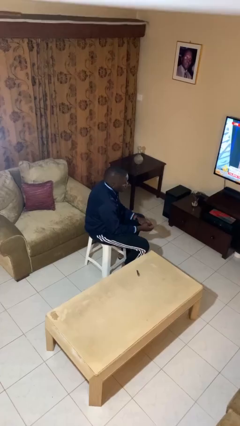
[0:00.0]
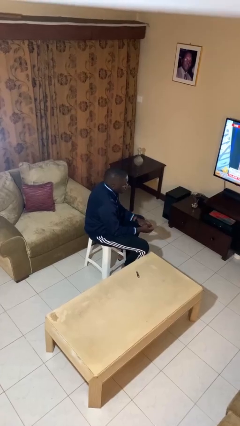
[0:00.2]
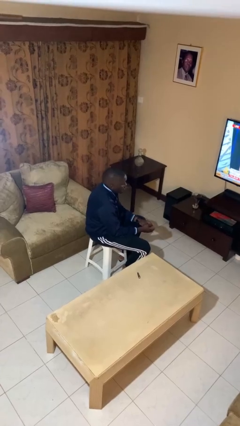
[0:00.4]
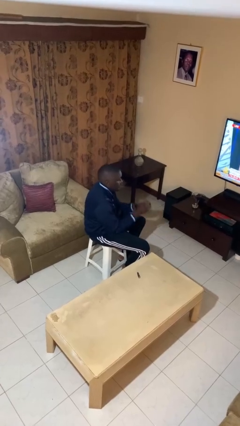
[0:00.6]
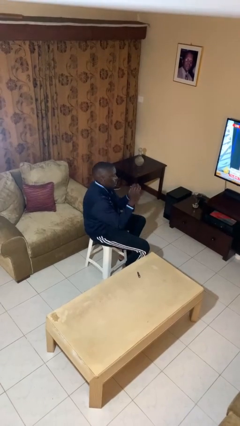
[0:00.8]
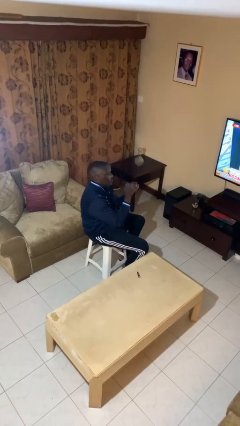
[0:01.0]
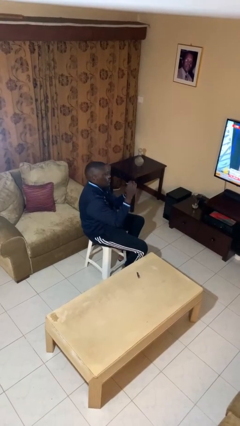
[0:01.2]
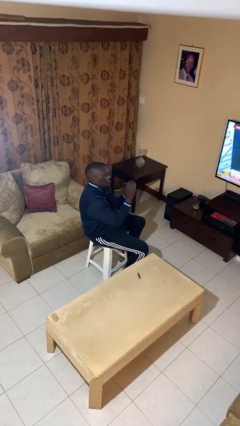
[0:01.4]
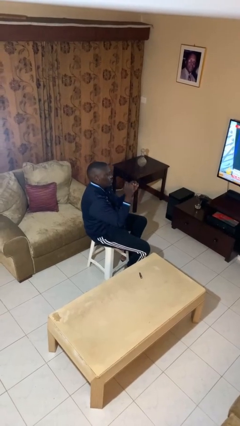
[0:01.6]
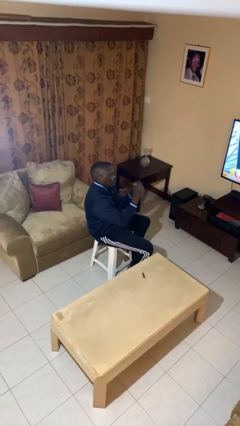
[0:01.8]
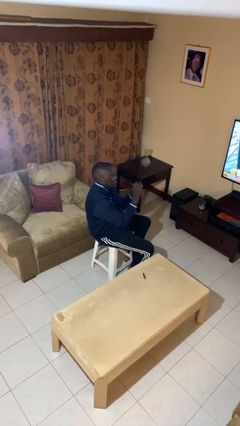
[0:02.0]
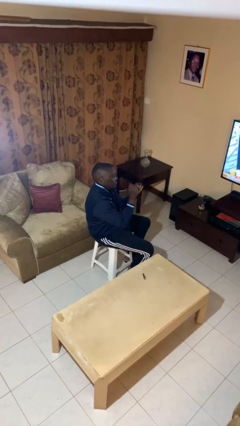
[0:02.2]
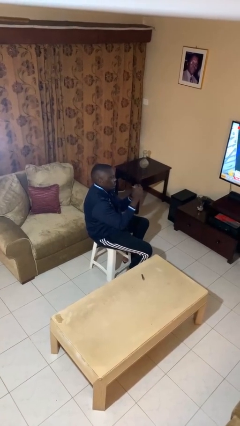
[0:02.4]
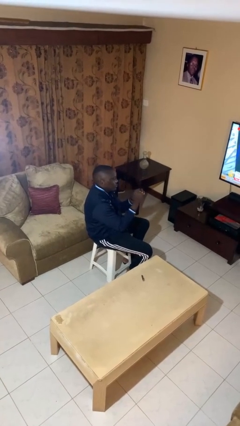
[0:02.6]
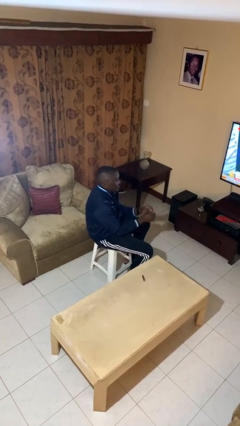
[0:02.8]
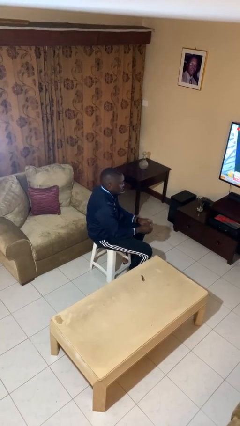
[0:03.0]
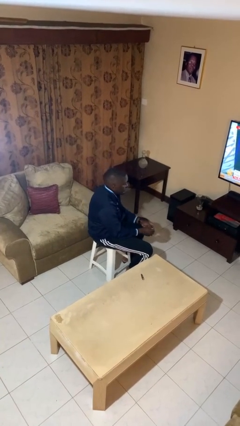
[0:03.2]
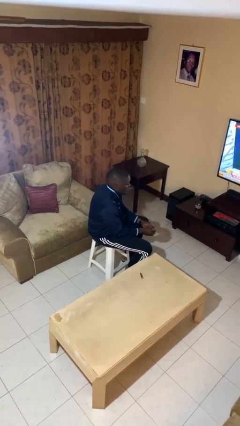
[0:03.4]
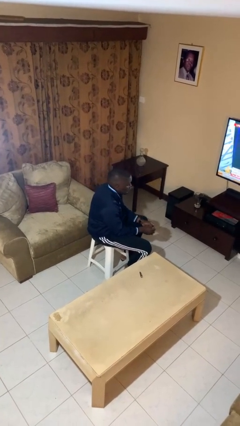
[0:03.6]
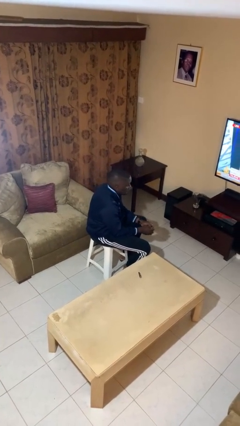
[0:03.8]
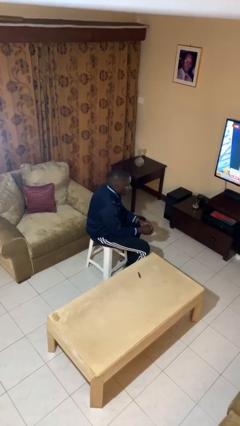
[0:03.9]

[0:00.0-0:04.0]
person files fingernails

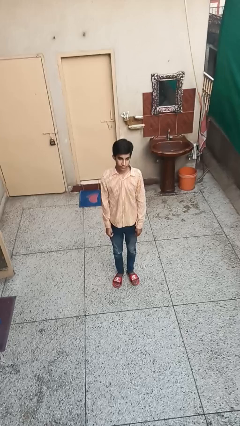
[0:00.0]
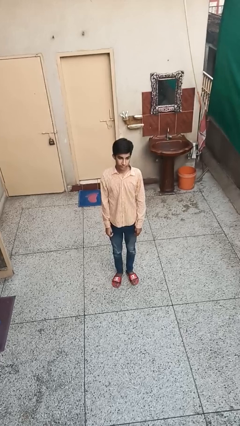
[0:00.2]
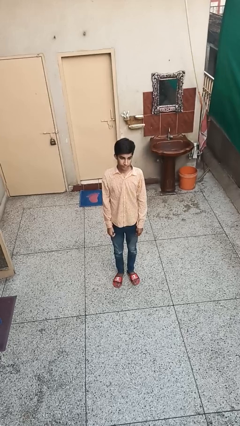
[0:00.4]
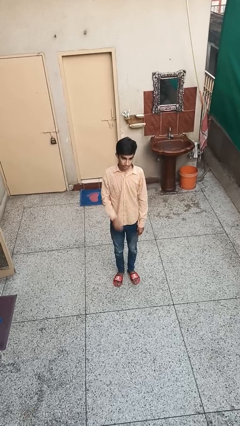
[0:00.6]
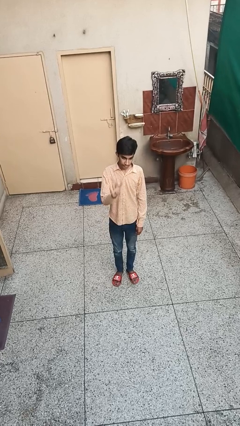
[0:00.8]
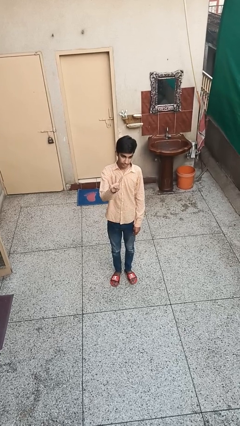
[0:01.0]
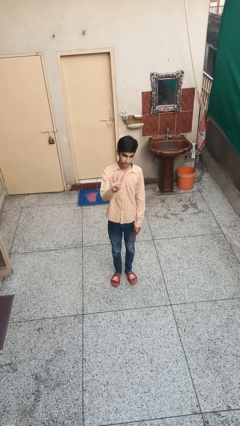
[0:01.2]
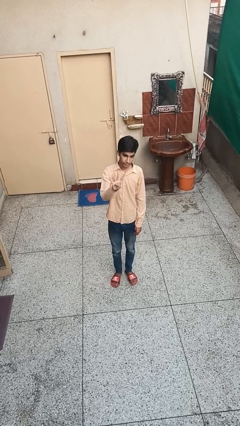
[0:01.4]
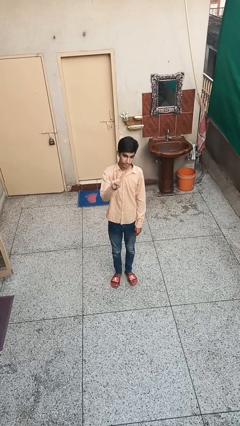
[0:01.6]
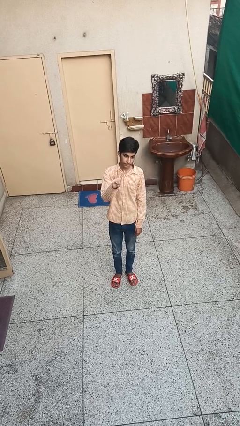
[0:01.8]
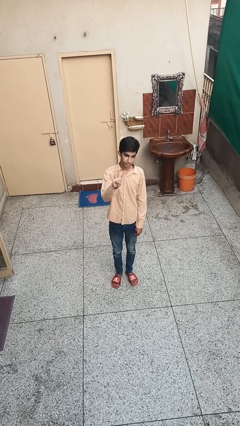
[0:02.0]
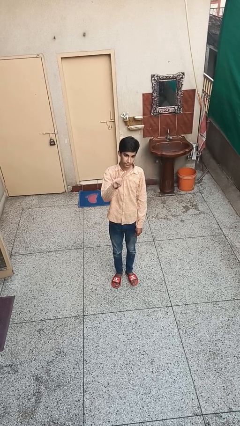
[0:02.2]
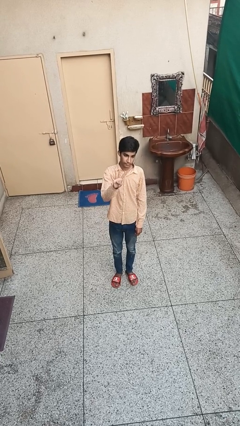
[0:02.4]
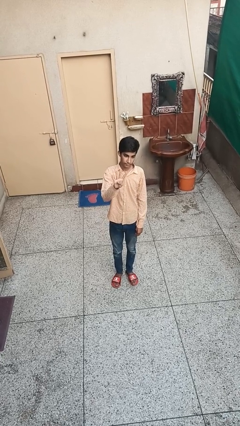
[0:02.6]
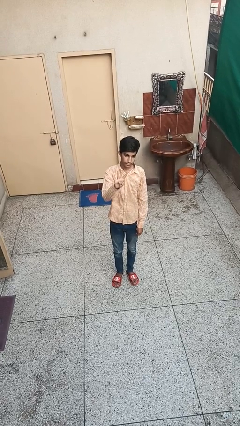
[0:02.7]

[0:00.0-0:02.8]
person gestures number four

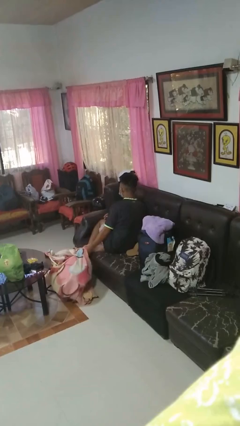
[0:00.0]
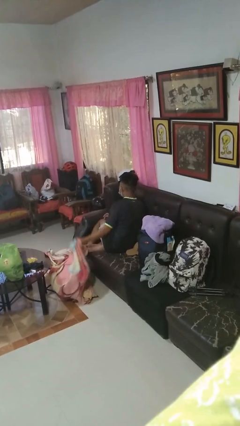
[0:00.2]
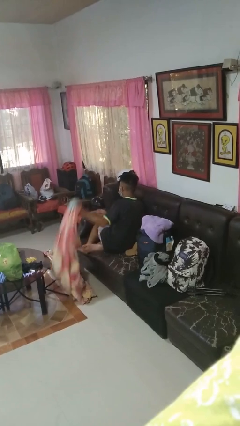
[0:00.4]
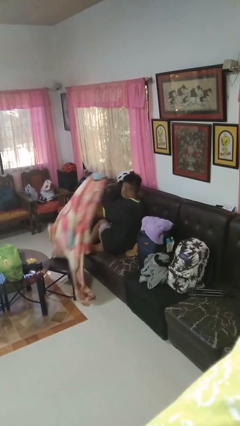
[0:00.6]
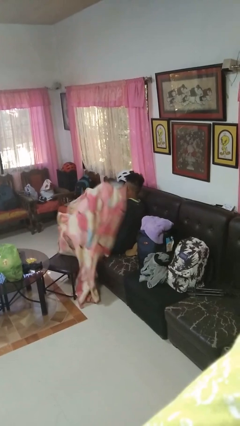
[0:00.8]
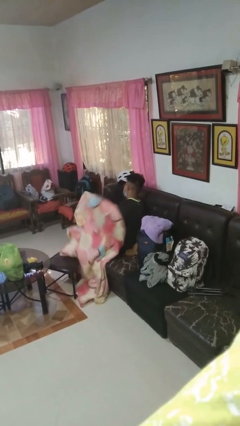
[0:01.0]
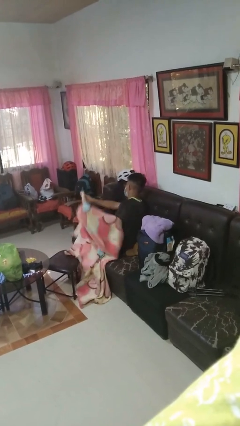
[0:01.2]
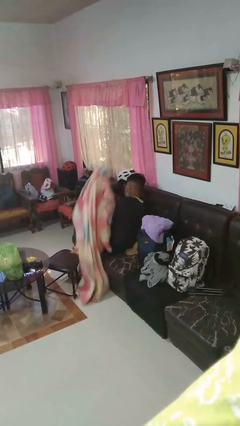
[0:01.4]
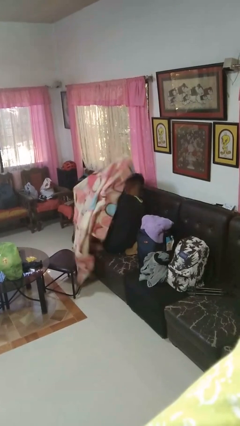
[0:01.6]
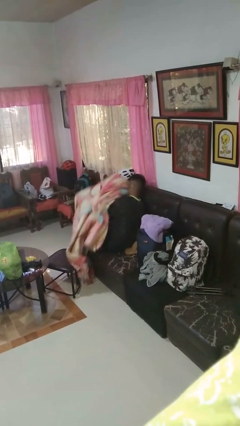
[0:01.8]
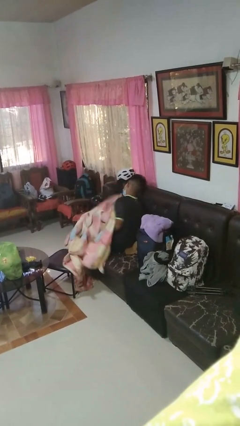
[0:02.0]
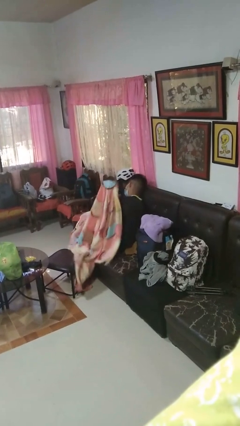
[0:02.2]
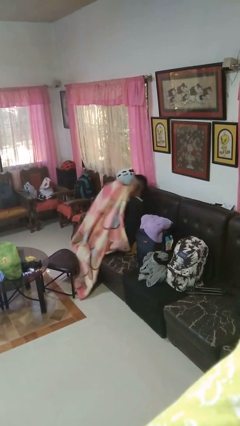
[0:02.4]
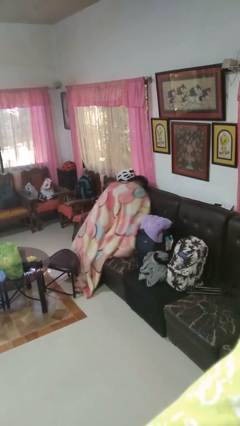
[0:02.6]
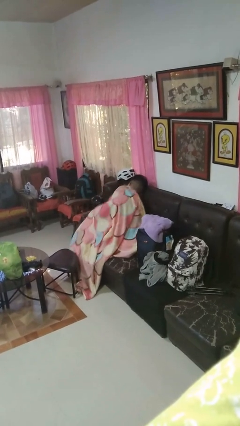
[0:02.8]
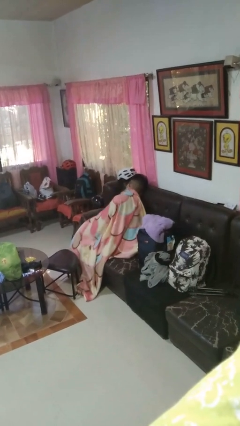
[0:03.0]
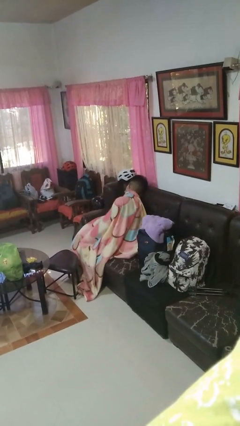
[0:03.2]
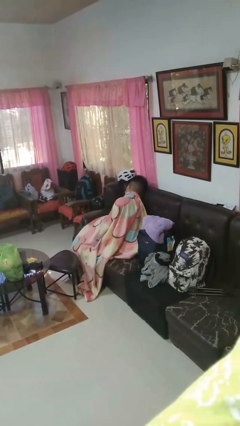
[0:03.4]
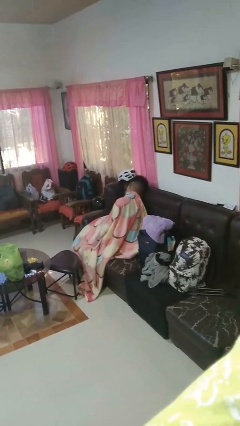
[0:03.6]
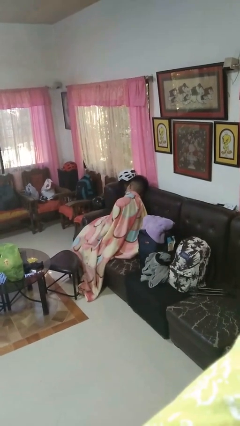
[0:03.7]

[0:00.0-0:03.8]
person covers with blanket

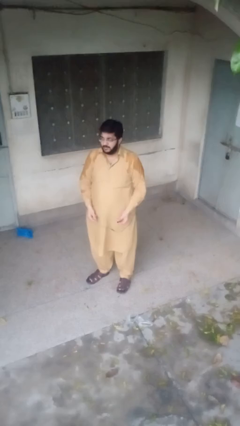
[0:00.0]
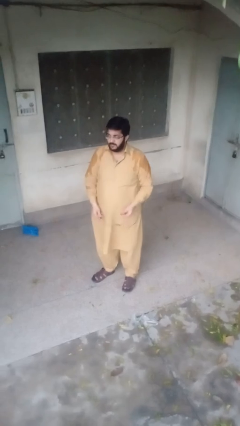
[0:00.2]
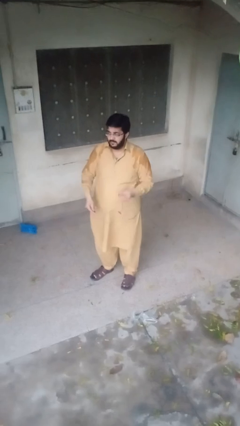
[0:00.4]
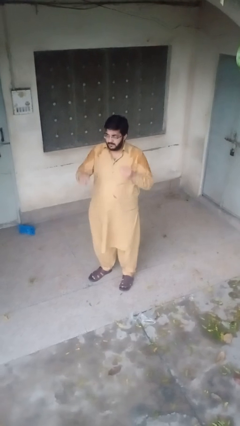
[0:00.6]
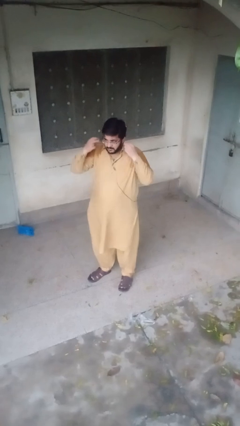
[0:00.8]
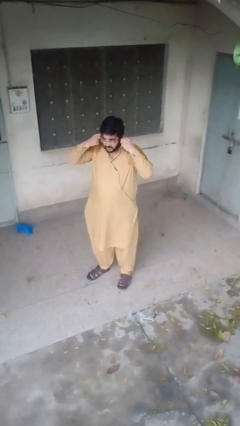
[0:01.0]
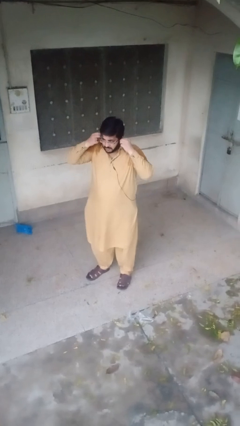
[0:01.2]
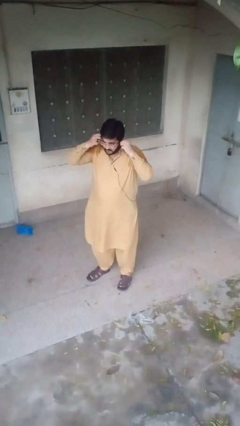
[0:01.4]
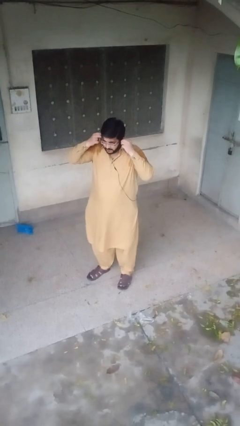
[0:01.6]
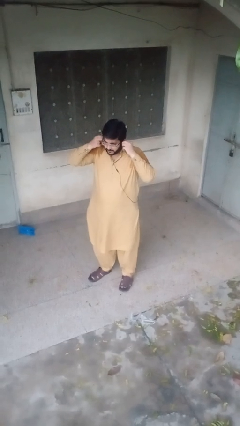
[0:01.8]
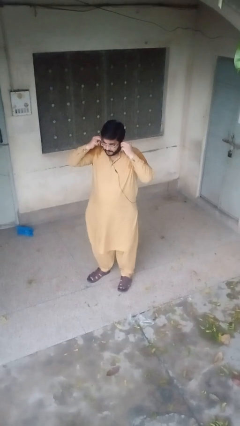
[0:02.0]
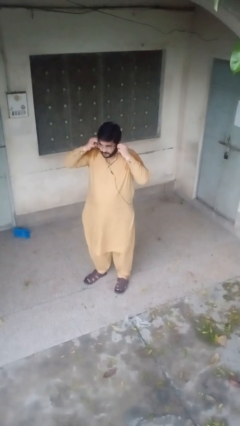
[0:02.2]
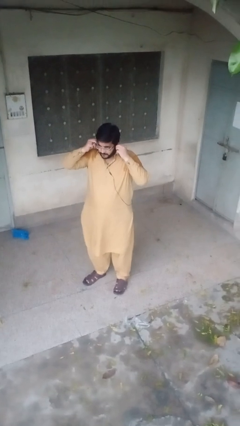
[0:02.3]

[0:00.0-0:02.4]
person puts on headphones

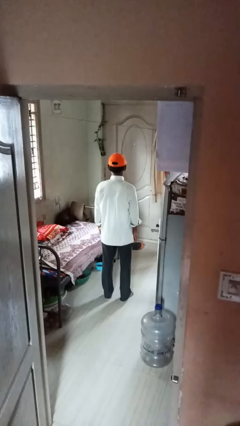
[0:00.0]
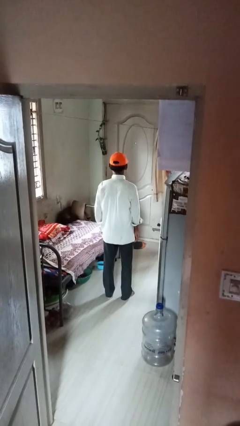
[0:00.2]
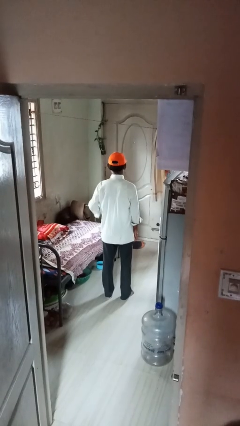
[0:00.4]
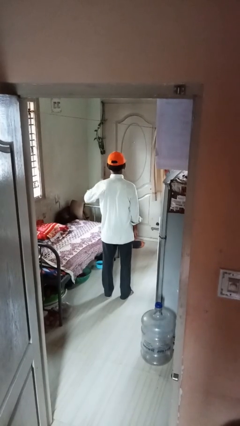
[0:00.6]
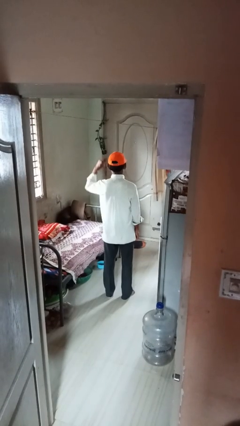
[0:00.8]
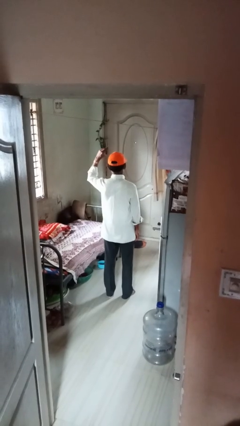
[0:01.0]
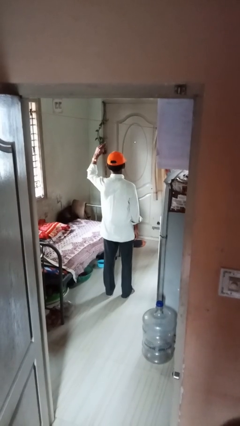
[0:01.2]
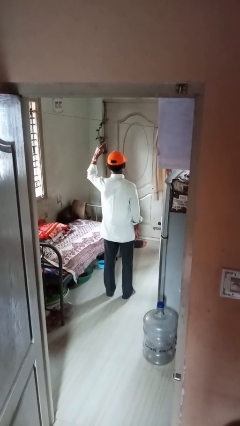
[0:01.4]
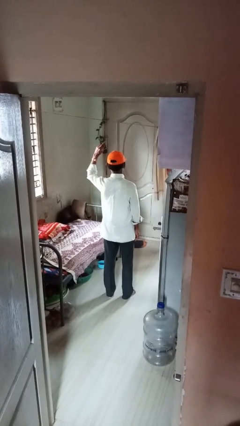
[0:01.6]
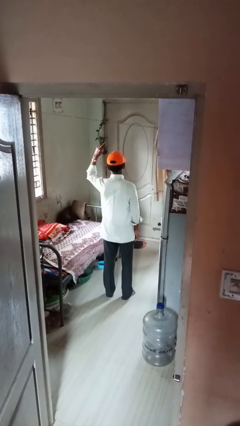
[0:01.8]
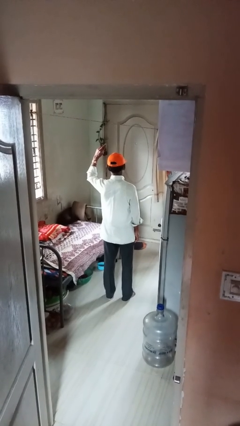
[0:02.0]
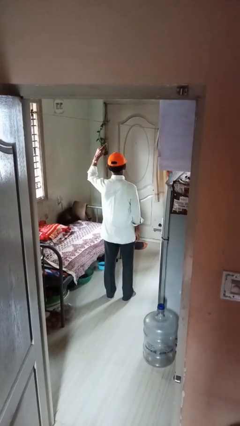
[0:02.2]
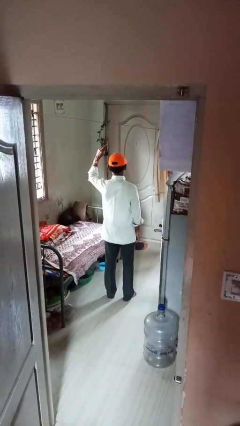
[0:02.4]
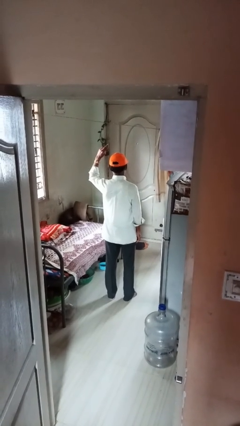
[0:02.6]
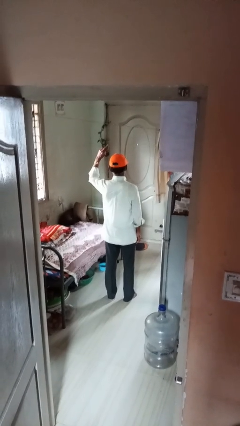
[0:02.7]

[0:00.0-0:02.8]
person gestures swipe up

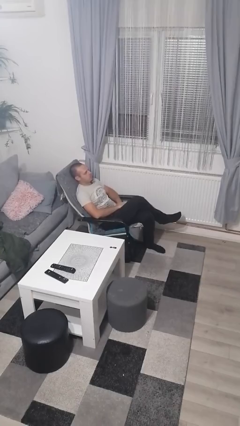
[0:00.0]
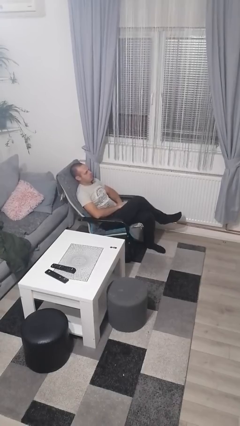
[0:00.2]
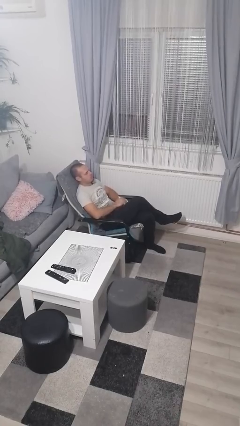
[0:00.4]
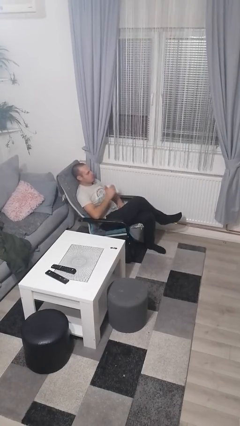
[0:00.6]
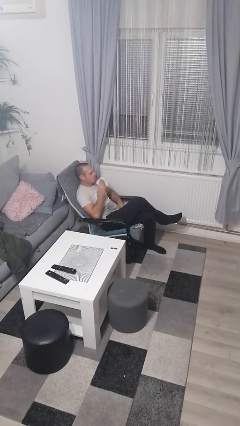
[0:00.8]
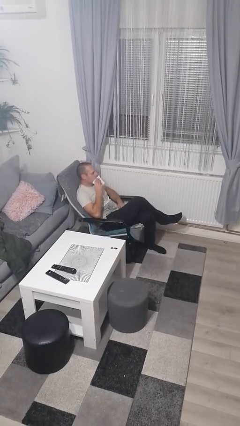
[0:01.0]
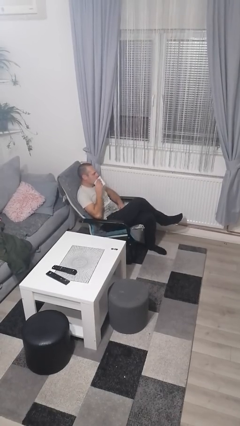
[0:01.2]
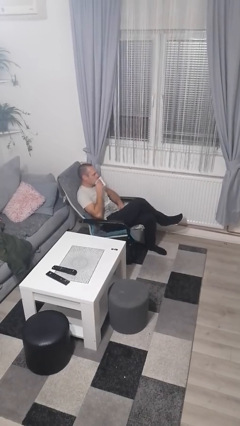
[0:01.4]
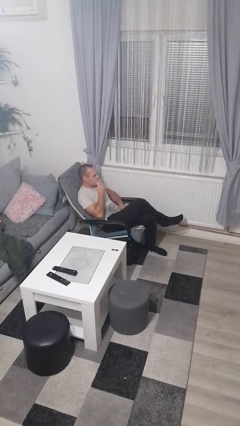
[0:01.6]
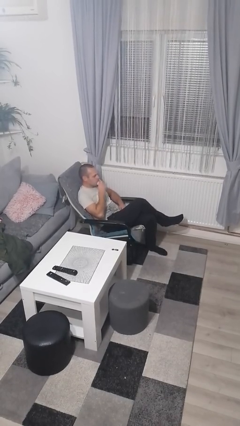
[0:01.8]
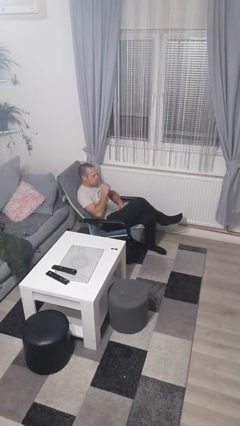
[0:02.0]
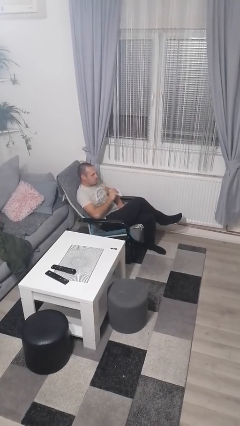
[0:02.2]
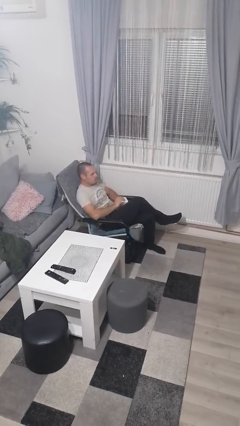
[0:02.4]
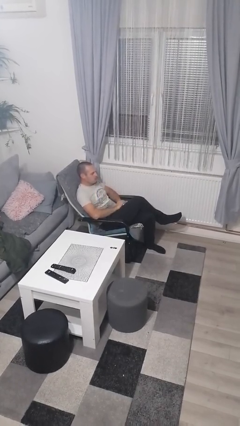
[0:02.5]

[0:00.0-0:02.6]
person wipes mouth with napkin
